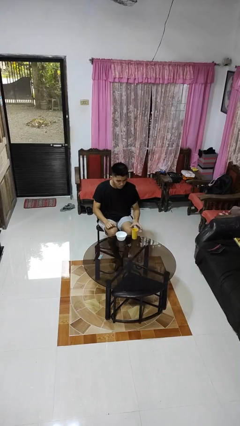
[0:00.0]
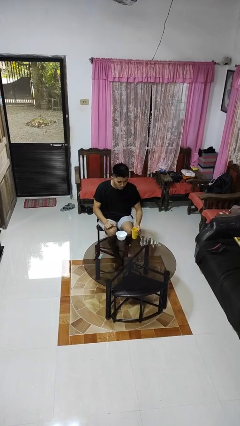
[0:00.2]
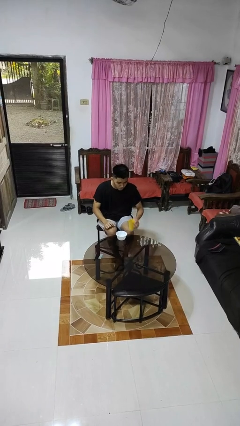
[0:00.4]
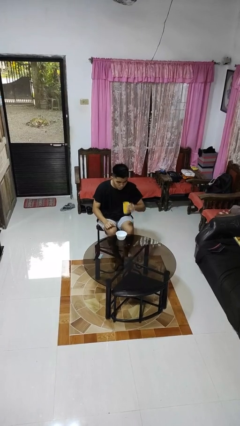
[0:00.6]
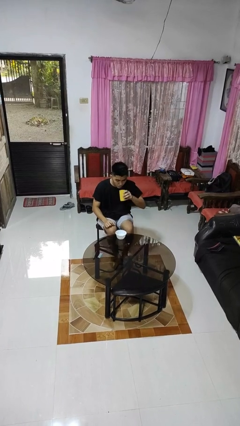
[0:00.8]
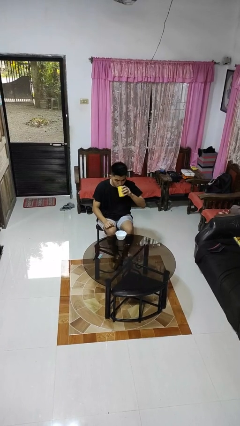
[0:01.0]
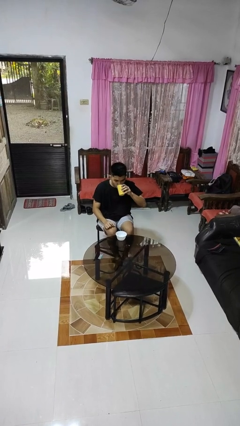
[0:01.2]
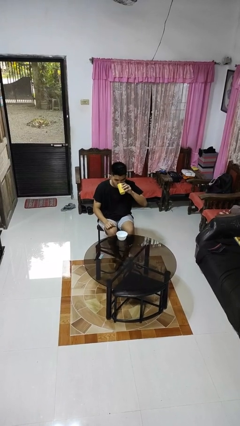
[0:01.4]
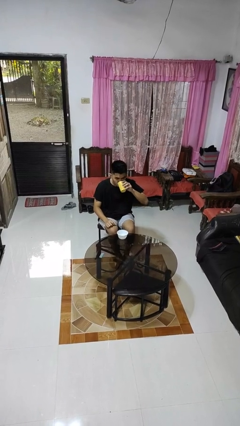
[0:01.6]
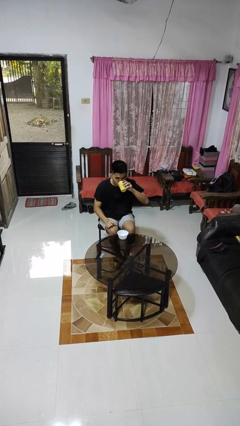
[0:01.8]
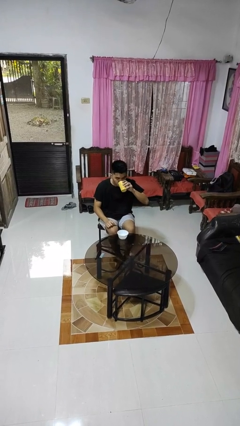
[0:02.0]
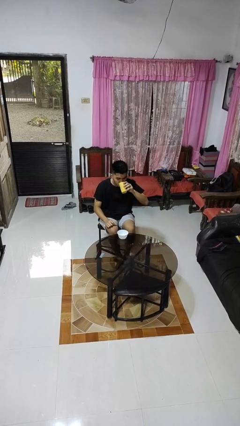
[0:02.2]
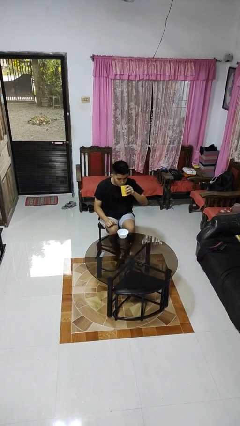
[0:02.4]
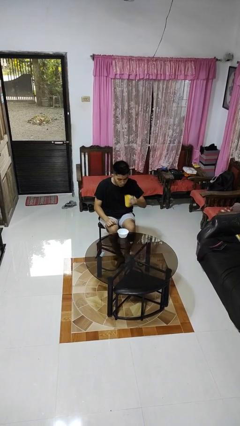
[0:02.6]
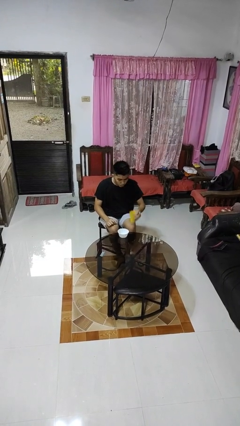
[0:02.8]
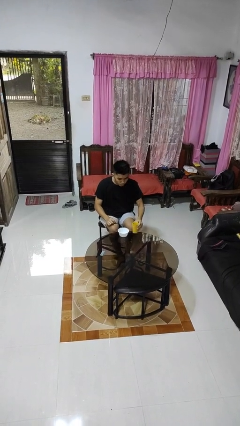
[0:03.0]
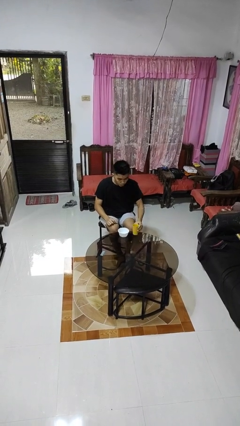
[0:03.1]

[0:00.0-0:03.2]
person drinks from cup

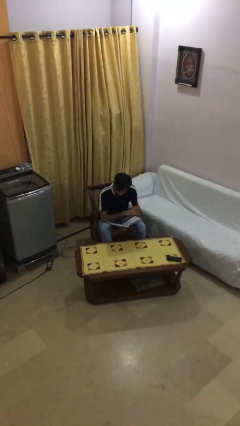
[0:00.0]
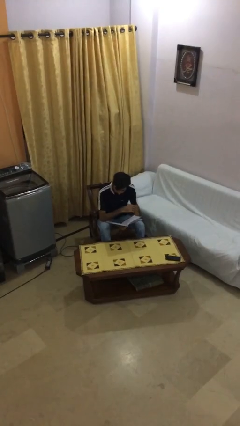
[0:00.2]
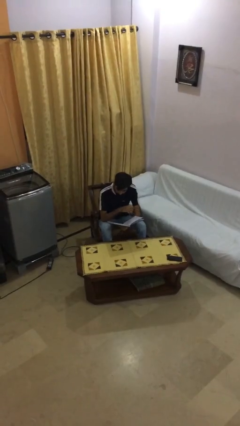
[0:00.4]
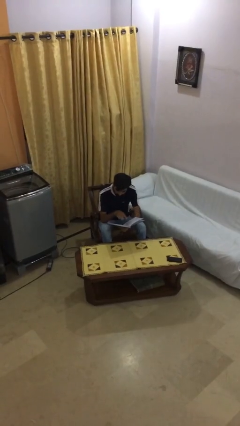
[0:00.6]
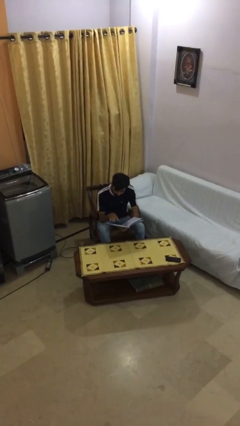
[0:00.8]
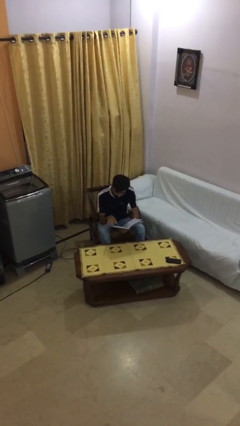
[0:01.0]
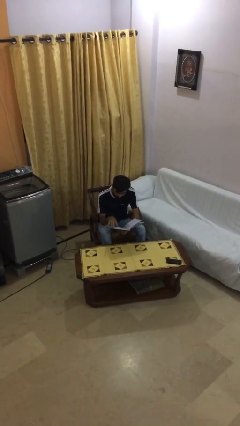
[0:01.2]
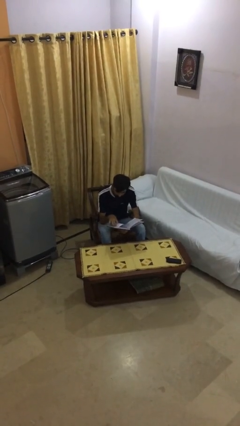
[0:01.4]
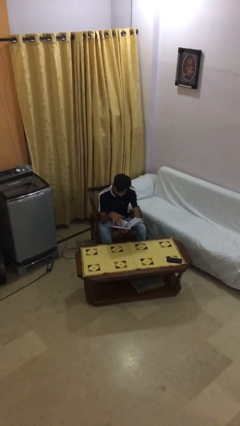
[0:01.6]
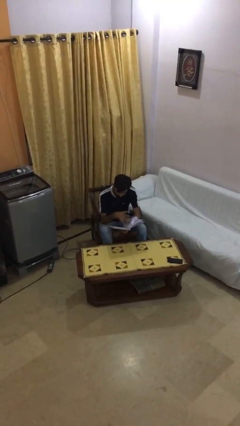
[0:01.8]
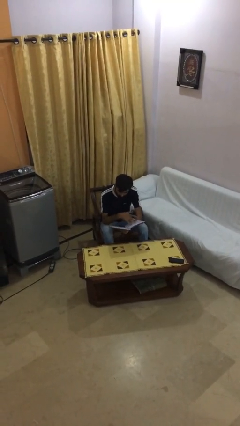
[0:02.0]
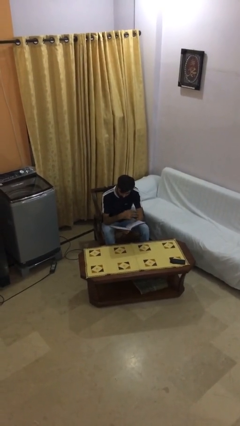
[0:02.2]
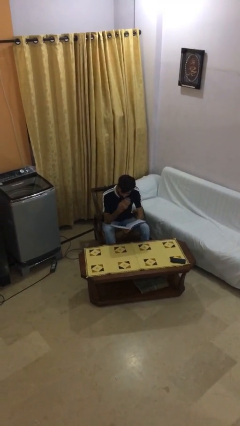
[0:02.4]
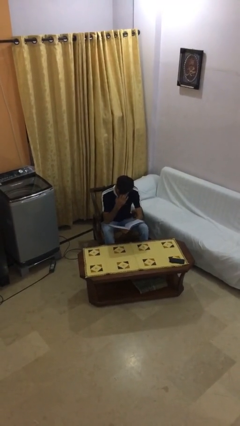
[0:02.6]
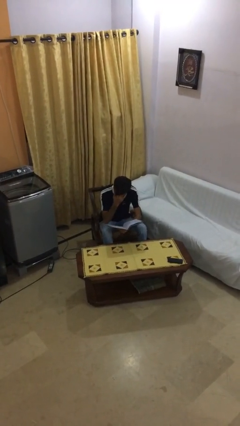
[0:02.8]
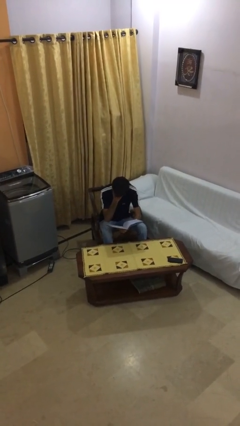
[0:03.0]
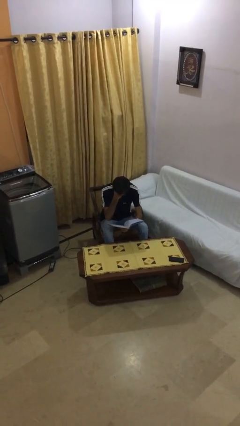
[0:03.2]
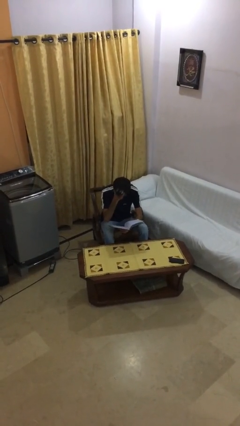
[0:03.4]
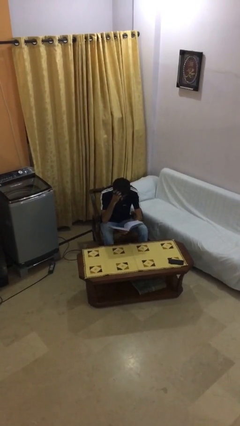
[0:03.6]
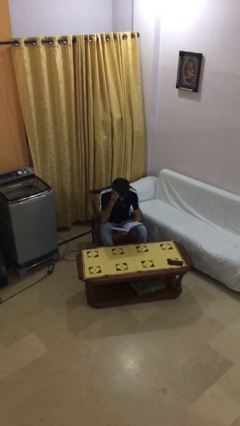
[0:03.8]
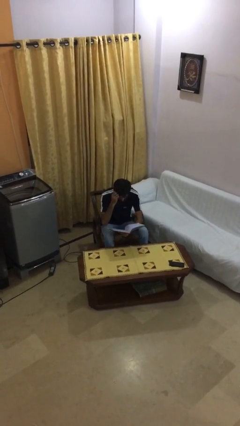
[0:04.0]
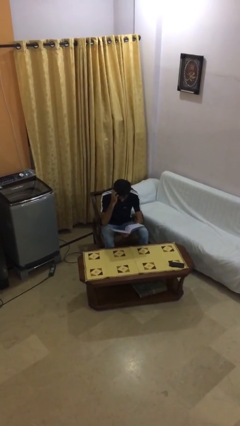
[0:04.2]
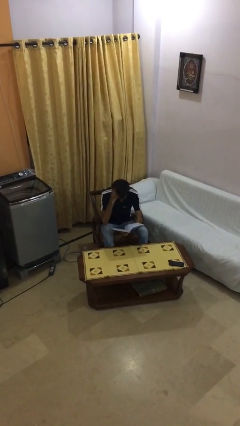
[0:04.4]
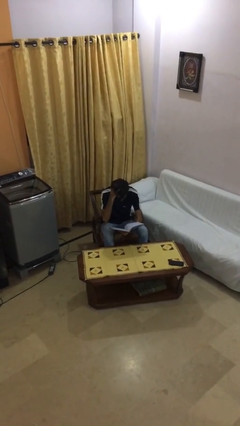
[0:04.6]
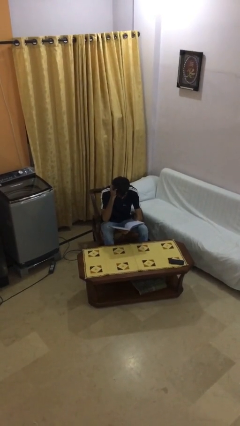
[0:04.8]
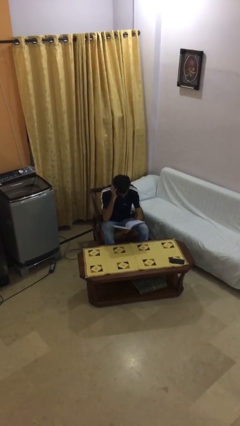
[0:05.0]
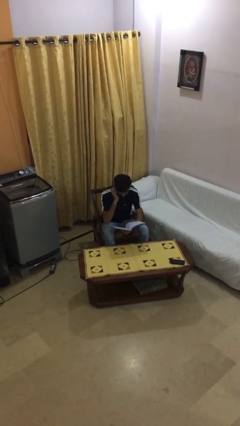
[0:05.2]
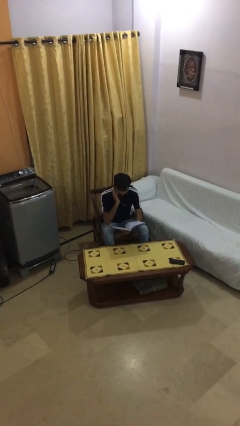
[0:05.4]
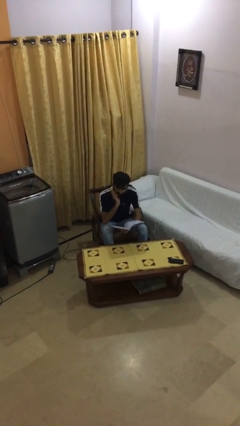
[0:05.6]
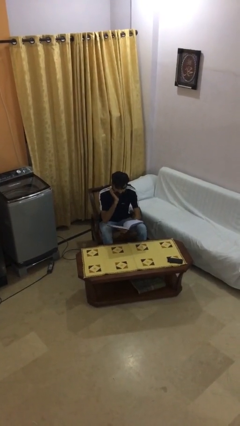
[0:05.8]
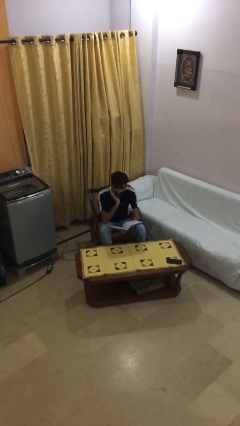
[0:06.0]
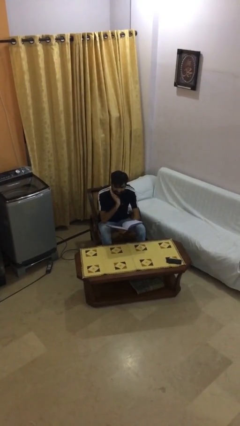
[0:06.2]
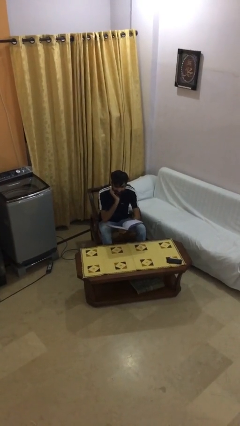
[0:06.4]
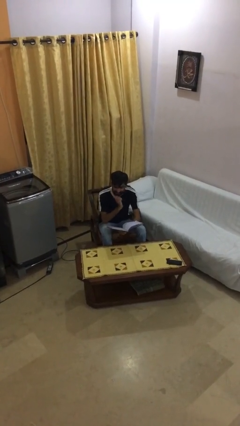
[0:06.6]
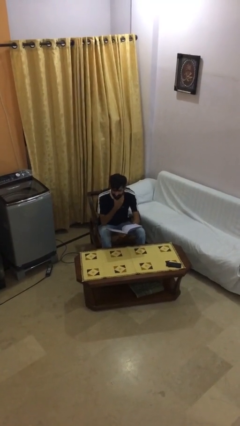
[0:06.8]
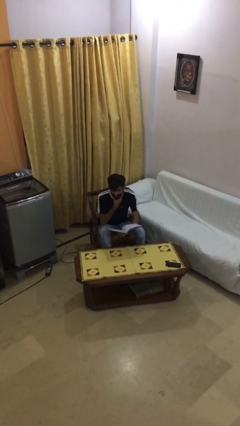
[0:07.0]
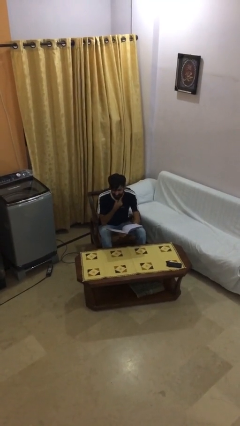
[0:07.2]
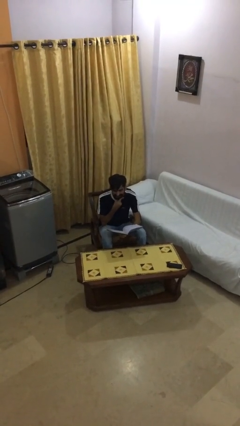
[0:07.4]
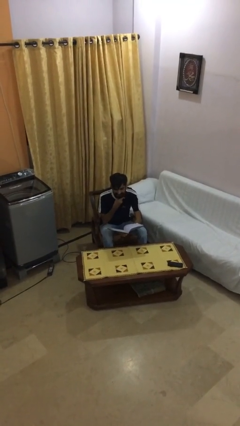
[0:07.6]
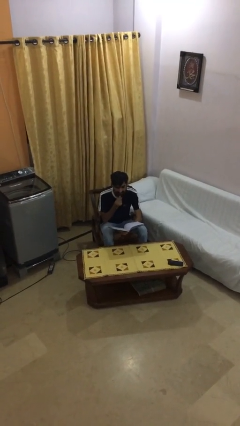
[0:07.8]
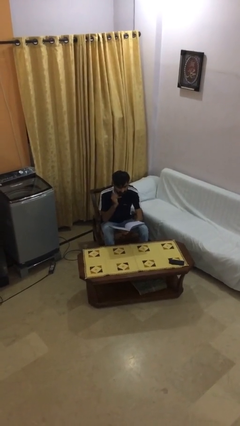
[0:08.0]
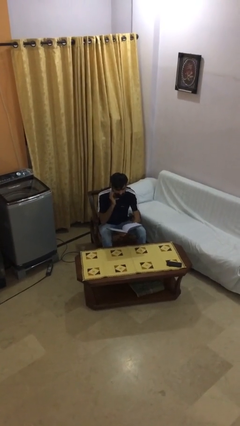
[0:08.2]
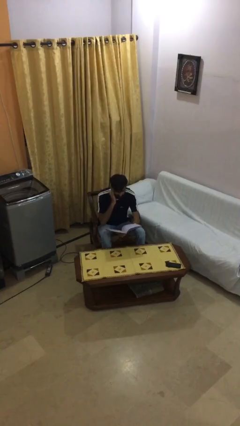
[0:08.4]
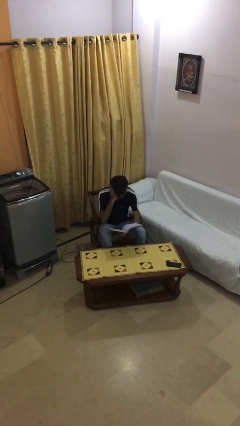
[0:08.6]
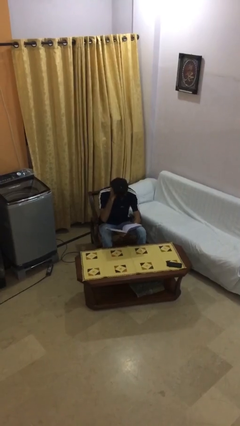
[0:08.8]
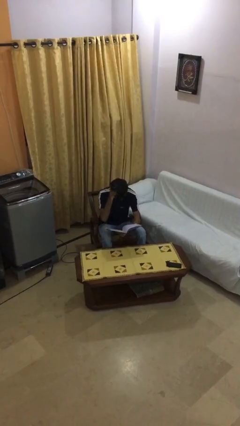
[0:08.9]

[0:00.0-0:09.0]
person reads document

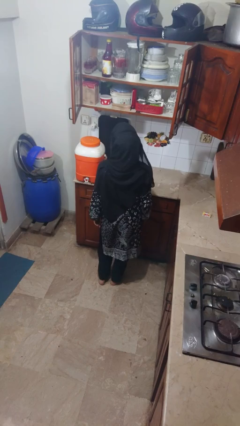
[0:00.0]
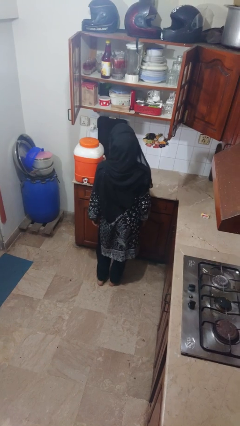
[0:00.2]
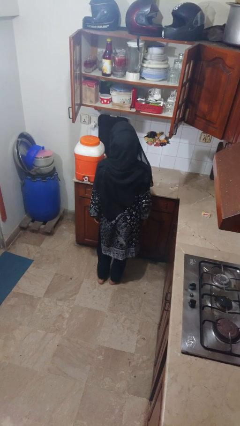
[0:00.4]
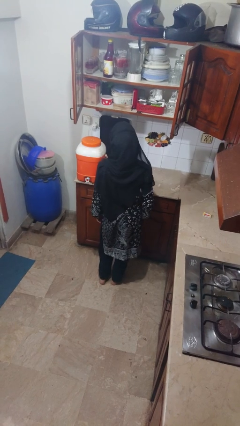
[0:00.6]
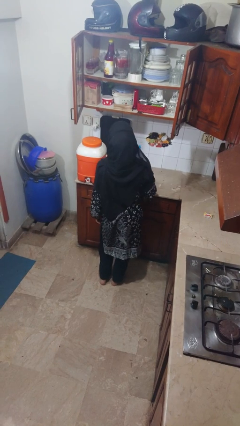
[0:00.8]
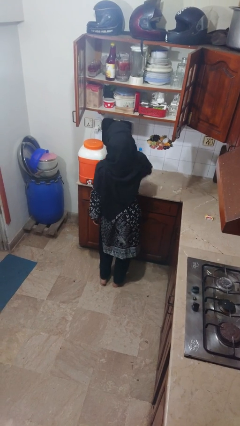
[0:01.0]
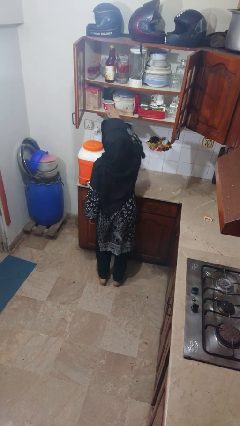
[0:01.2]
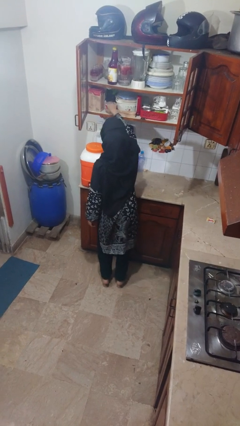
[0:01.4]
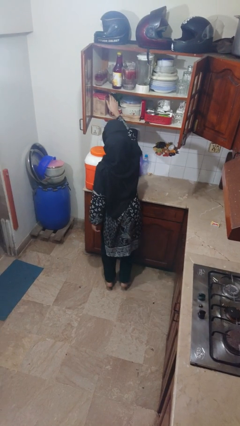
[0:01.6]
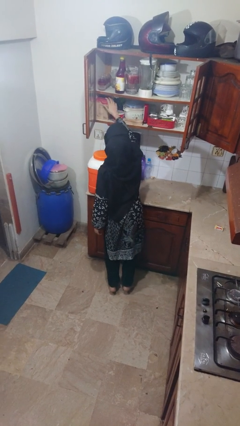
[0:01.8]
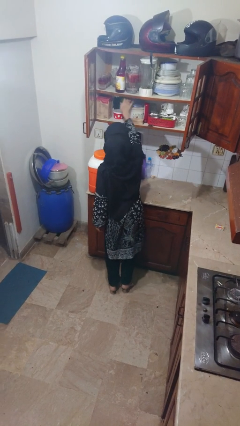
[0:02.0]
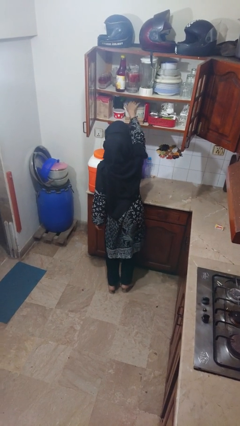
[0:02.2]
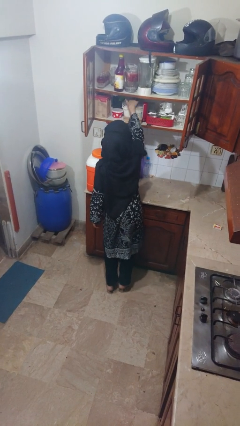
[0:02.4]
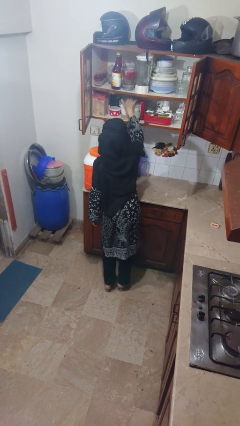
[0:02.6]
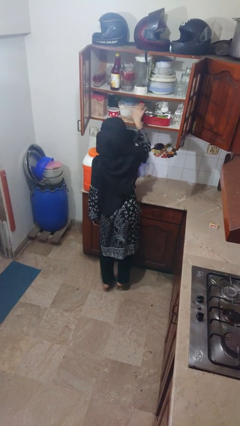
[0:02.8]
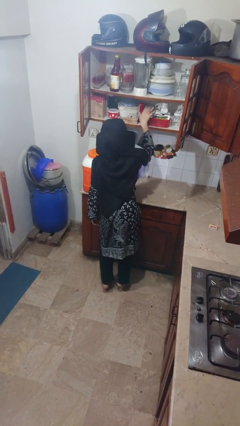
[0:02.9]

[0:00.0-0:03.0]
person searches in cabinet

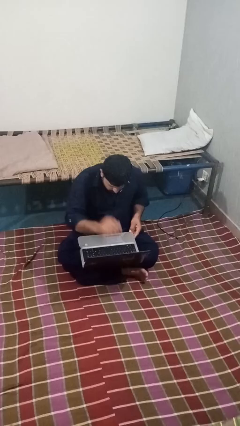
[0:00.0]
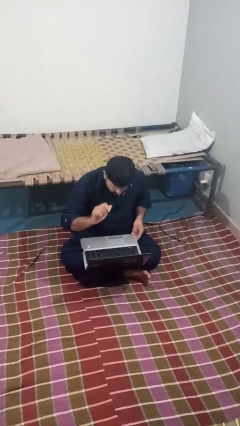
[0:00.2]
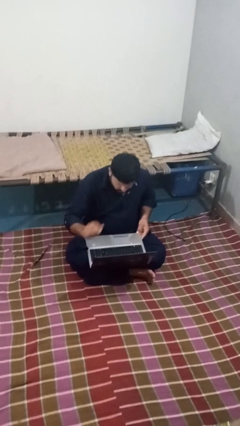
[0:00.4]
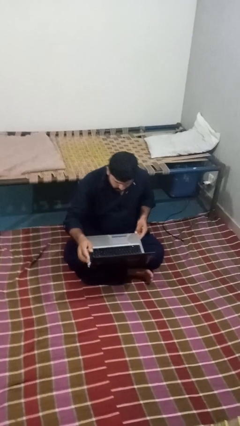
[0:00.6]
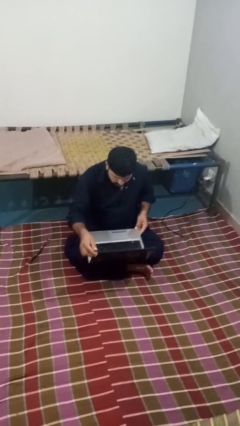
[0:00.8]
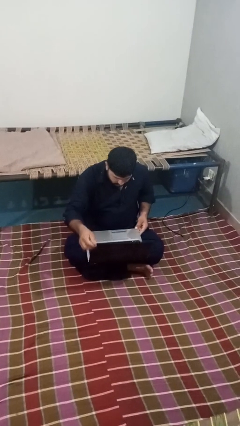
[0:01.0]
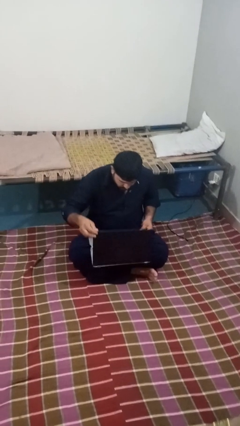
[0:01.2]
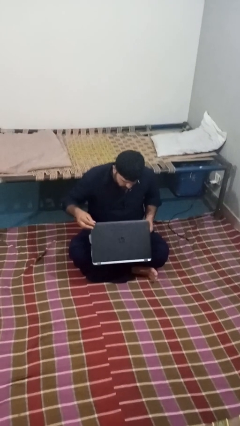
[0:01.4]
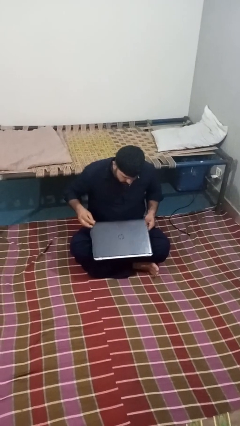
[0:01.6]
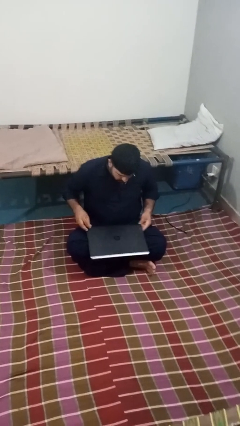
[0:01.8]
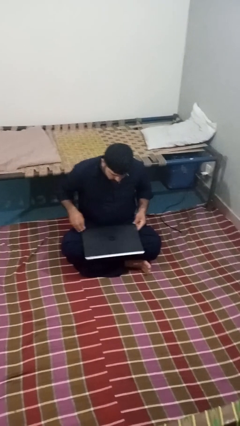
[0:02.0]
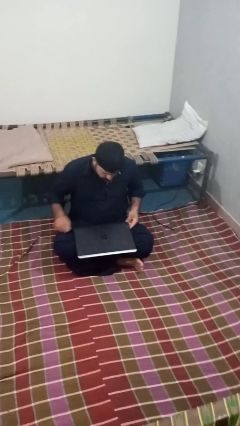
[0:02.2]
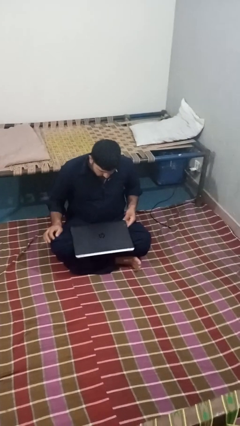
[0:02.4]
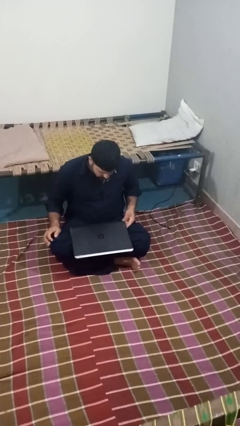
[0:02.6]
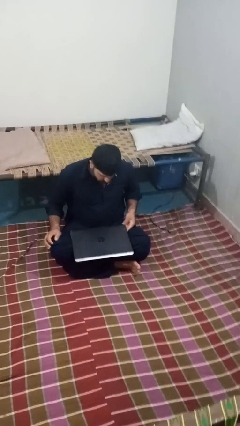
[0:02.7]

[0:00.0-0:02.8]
person closes laptop
